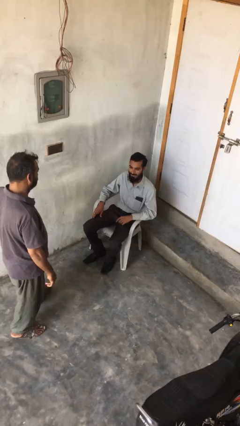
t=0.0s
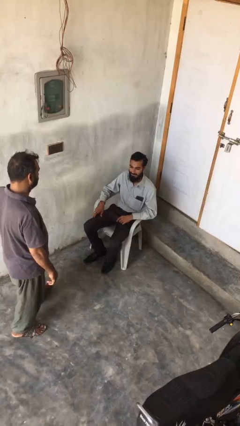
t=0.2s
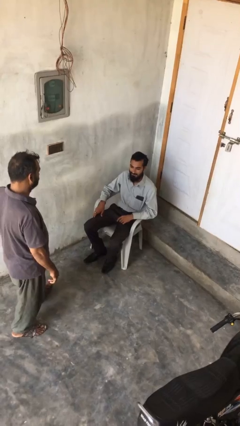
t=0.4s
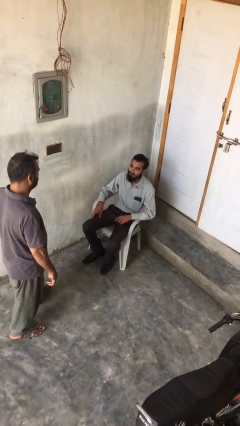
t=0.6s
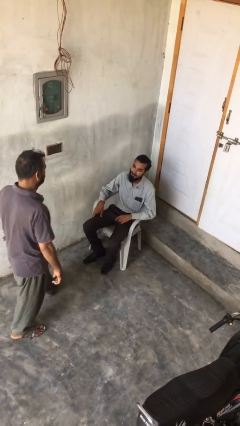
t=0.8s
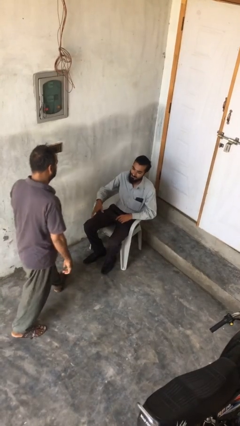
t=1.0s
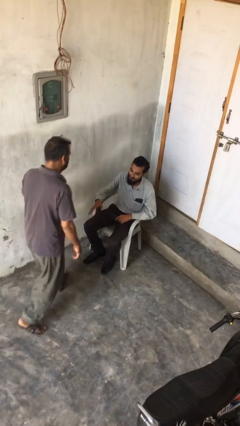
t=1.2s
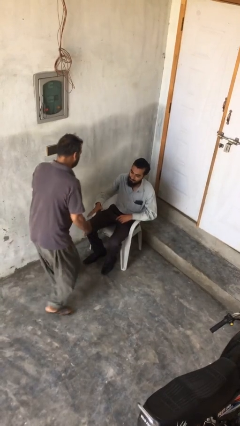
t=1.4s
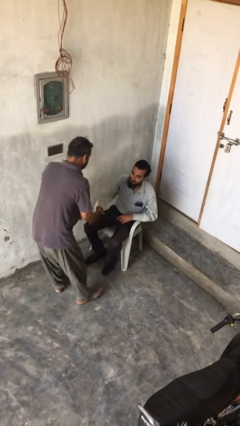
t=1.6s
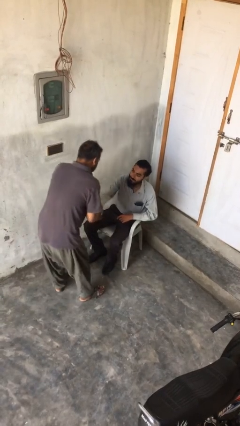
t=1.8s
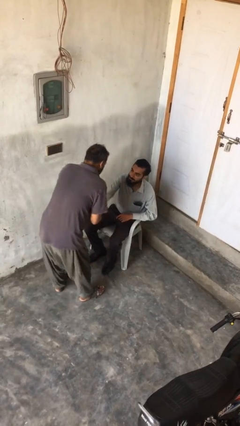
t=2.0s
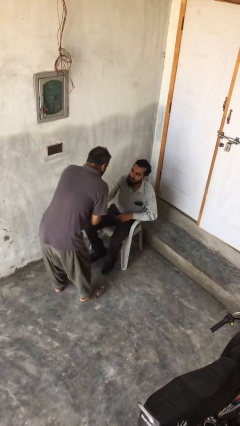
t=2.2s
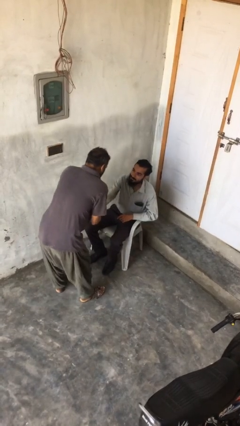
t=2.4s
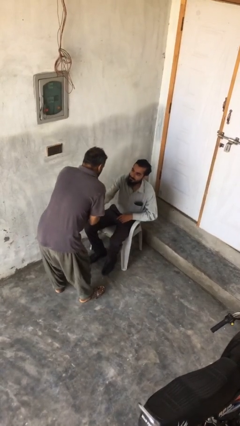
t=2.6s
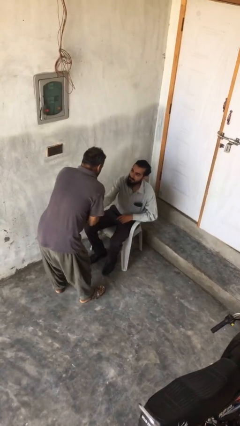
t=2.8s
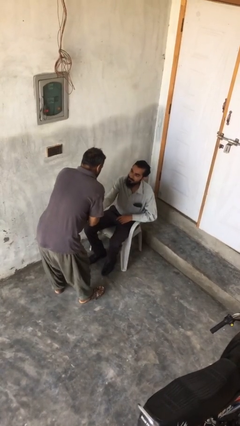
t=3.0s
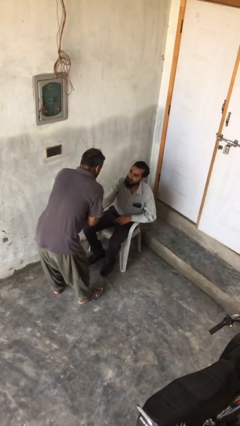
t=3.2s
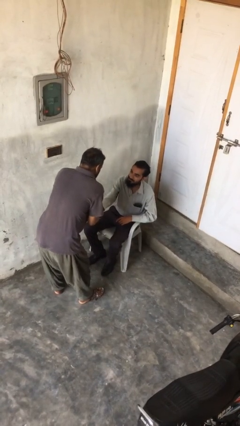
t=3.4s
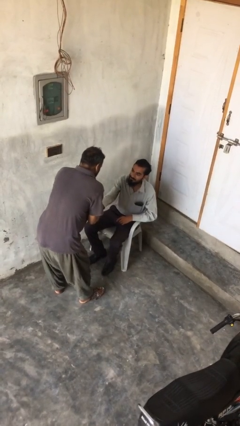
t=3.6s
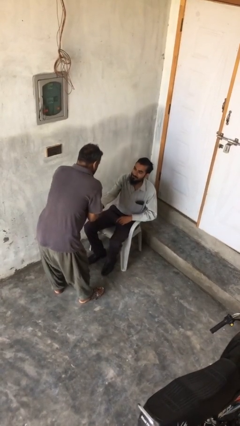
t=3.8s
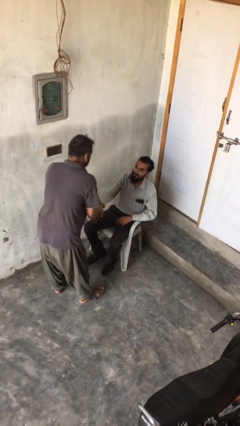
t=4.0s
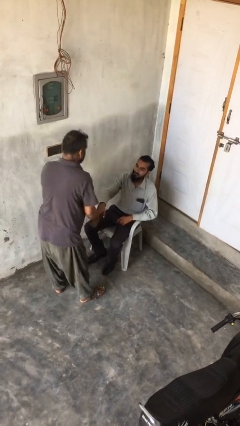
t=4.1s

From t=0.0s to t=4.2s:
person shakes hand

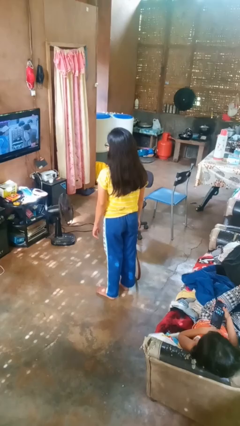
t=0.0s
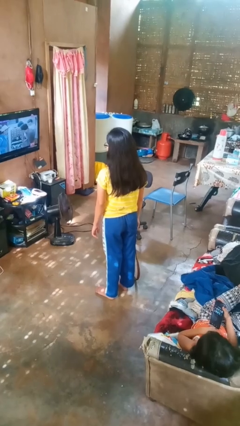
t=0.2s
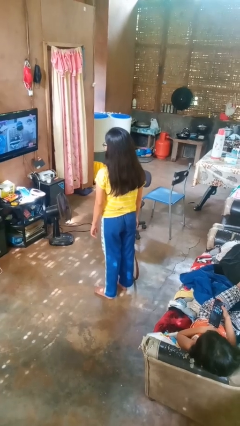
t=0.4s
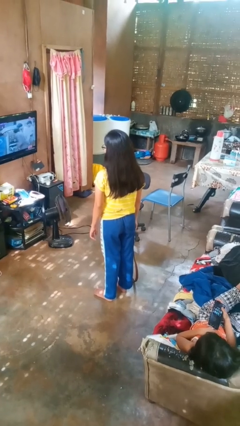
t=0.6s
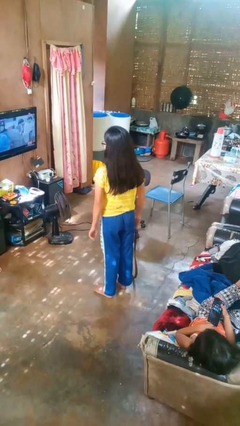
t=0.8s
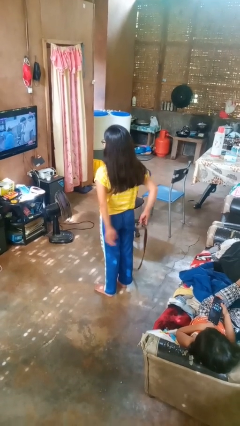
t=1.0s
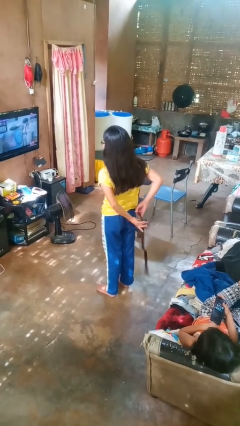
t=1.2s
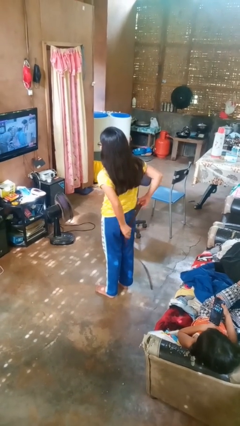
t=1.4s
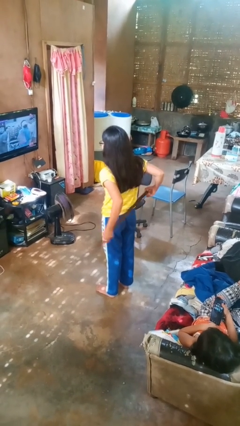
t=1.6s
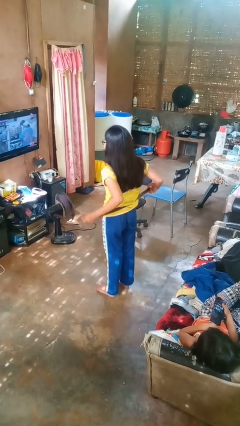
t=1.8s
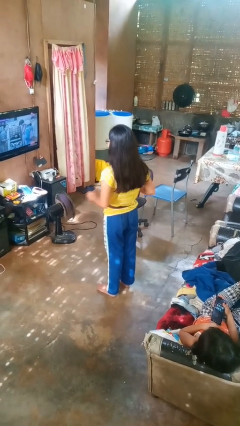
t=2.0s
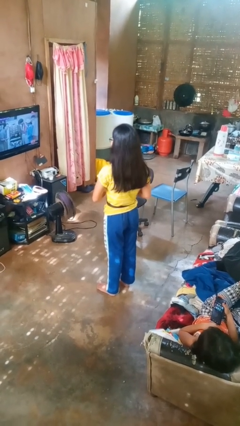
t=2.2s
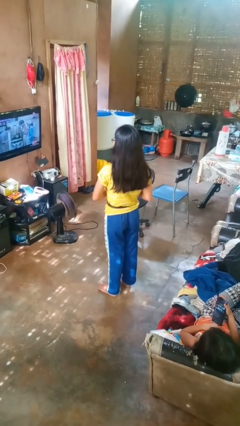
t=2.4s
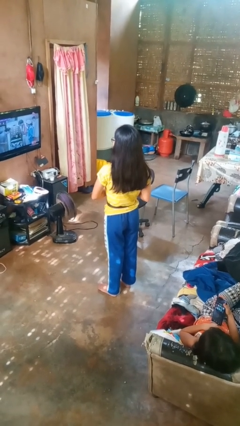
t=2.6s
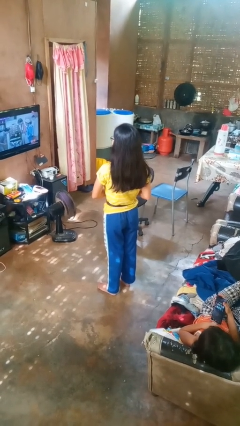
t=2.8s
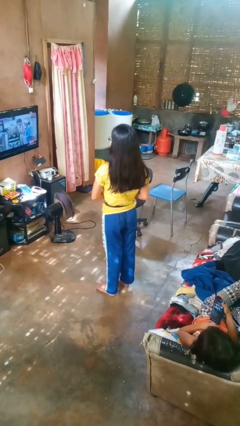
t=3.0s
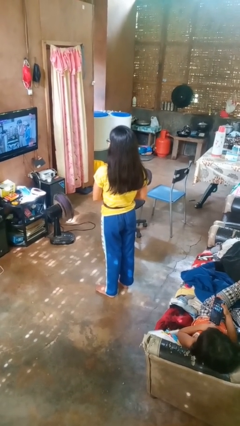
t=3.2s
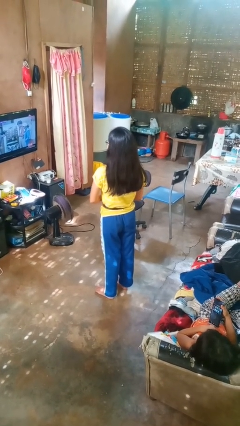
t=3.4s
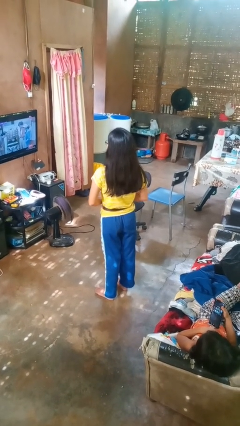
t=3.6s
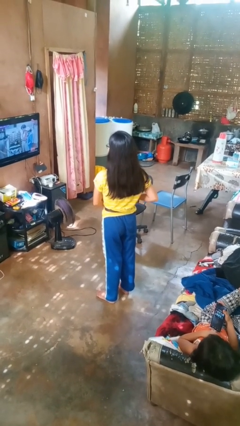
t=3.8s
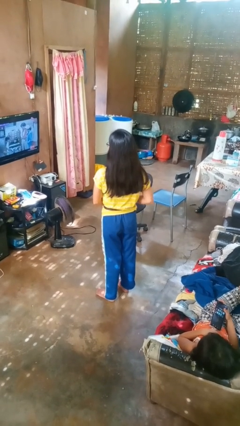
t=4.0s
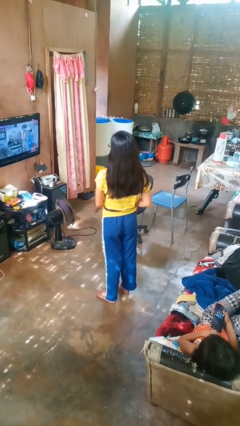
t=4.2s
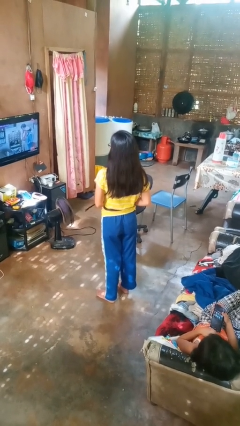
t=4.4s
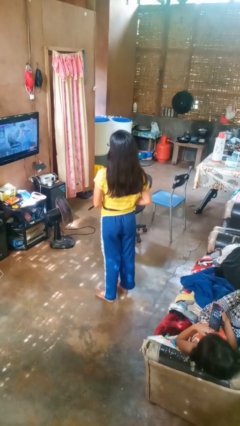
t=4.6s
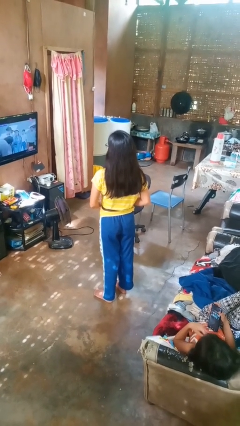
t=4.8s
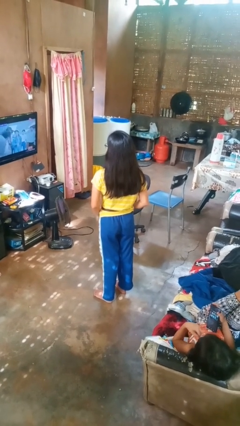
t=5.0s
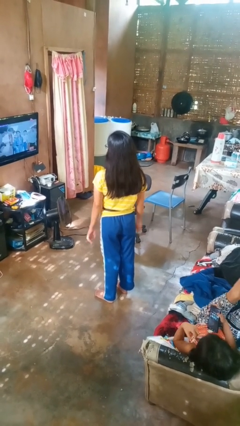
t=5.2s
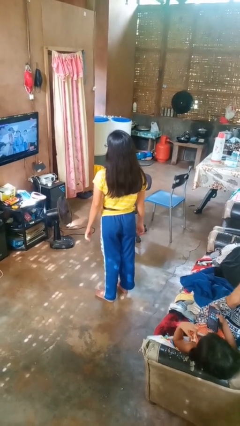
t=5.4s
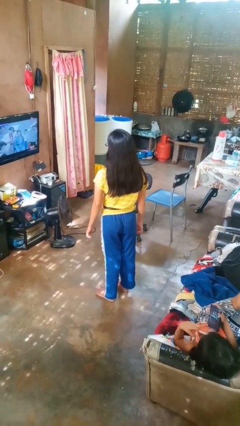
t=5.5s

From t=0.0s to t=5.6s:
person puts on belt

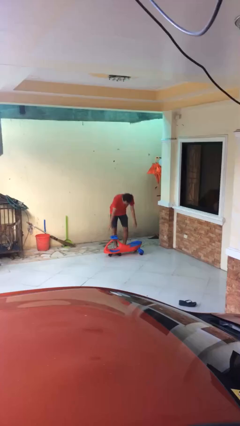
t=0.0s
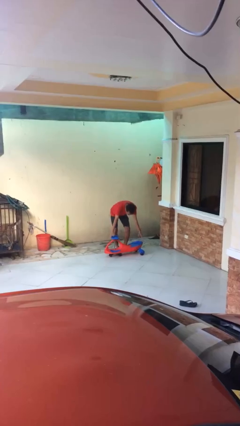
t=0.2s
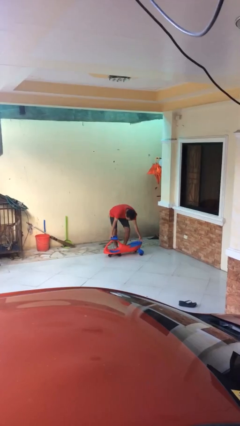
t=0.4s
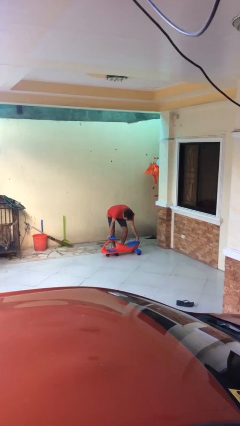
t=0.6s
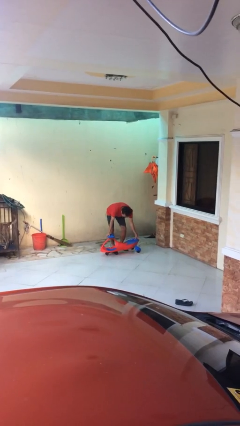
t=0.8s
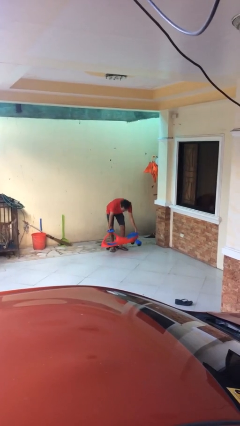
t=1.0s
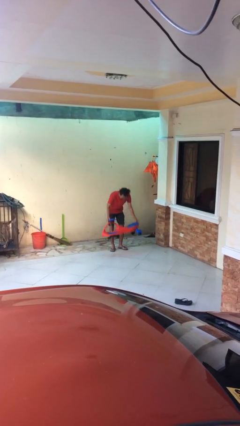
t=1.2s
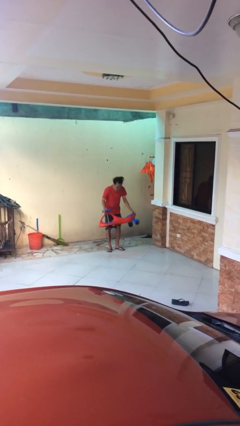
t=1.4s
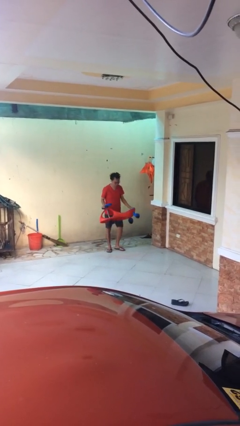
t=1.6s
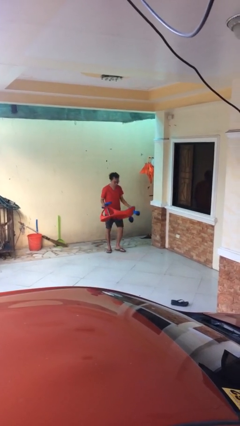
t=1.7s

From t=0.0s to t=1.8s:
person picks up object from floor

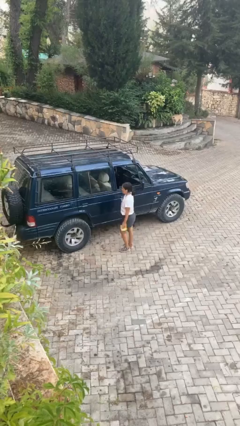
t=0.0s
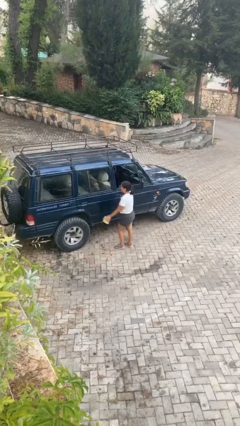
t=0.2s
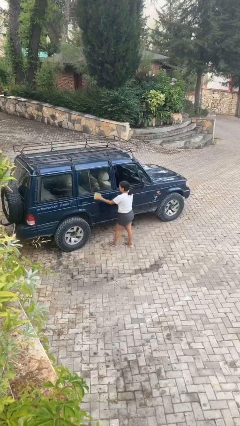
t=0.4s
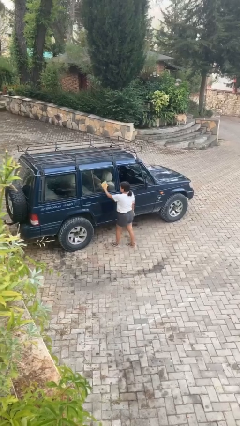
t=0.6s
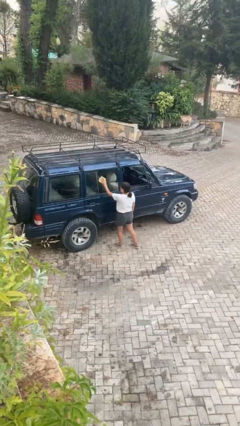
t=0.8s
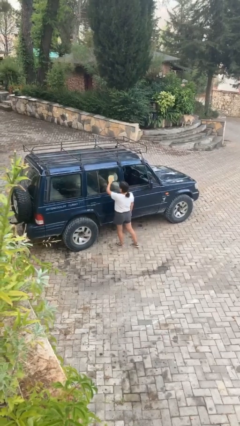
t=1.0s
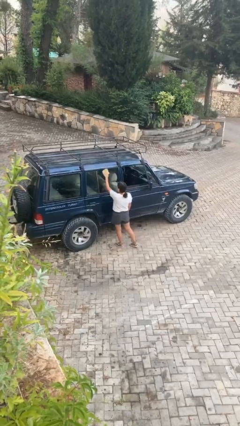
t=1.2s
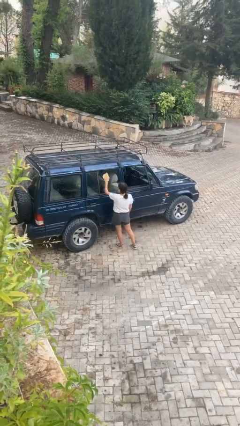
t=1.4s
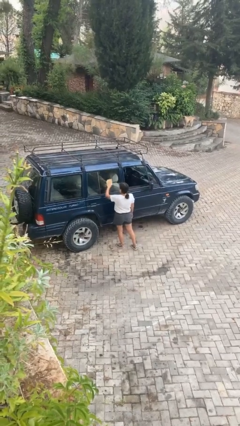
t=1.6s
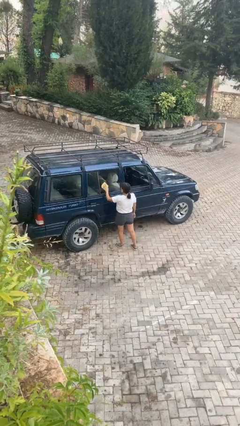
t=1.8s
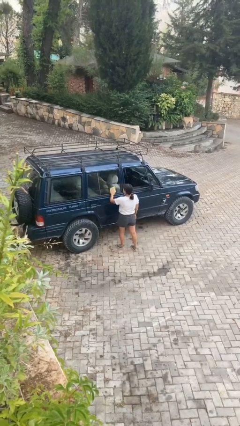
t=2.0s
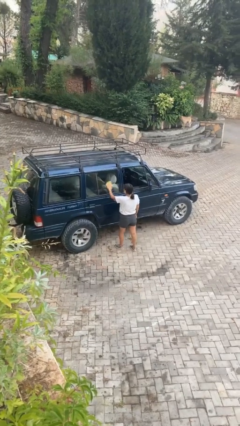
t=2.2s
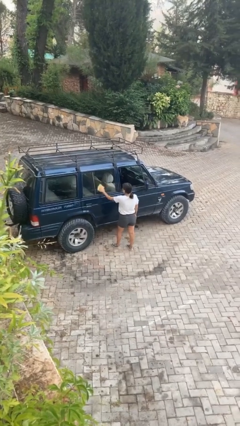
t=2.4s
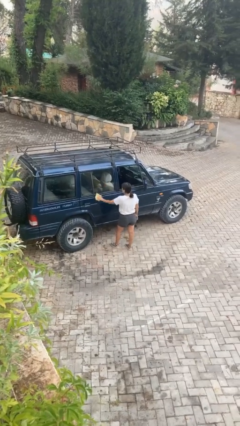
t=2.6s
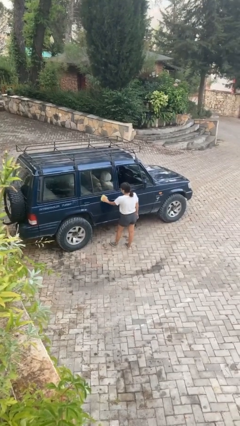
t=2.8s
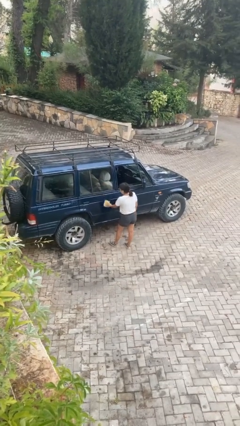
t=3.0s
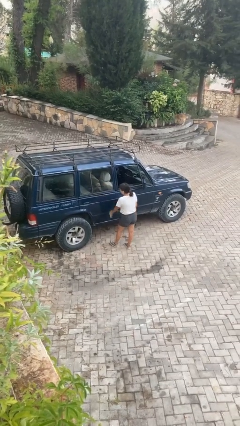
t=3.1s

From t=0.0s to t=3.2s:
person polishes car with rag

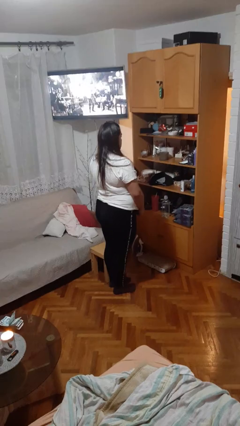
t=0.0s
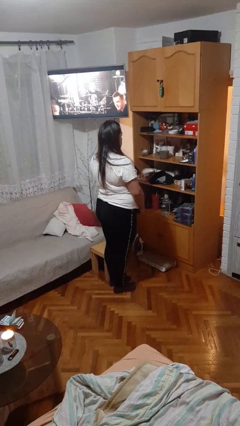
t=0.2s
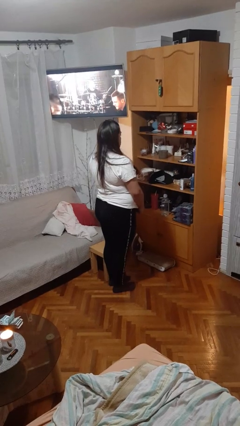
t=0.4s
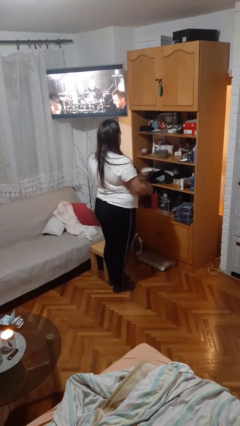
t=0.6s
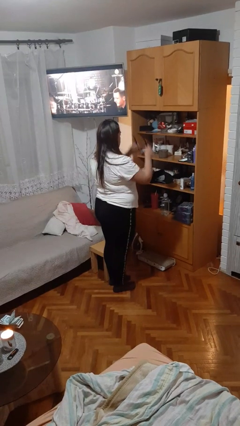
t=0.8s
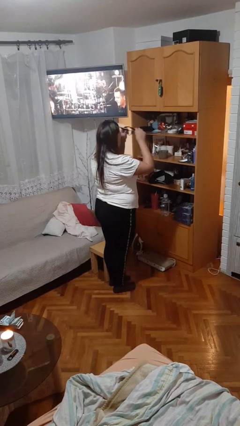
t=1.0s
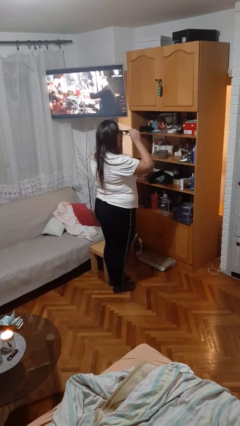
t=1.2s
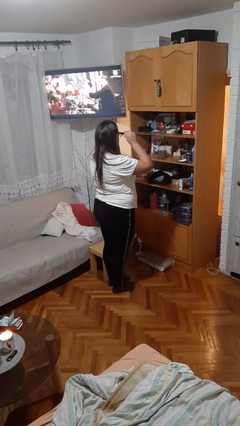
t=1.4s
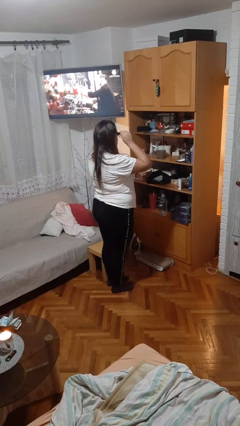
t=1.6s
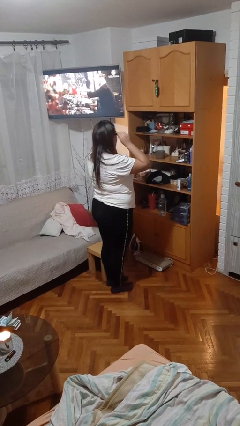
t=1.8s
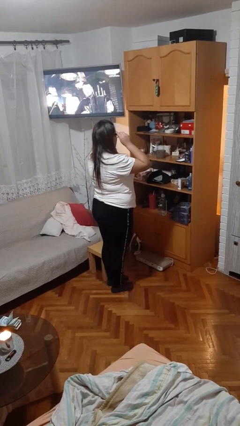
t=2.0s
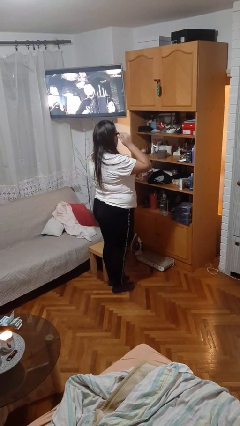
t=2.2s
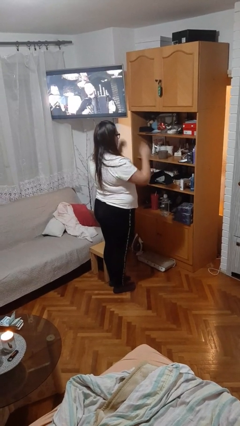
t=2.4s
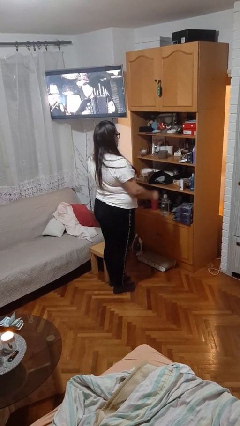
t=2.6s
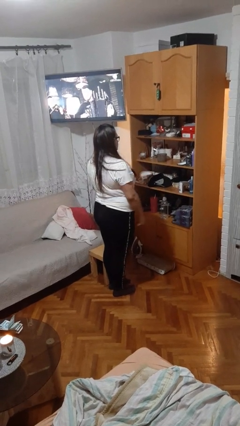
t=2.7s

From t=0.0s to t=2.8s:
person puts on glasses
